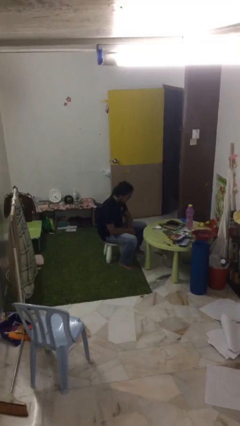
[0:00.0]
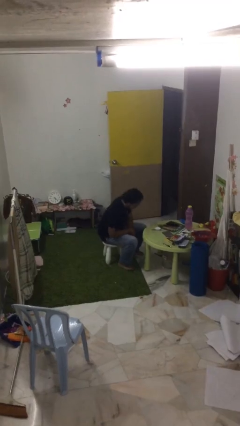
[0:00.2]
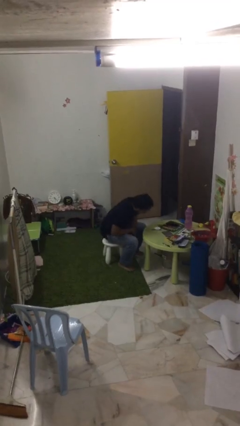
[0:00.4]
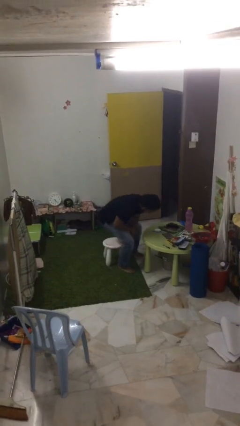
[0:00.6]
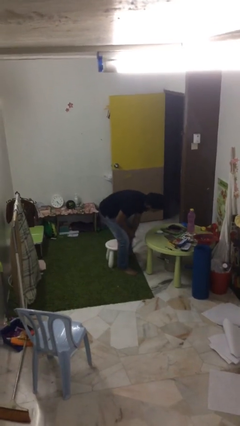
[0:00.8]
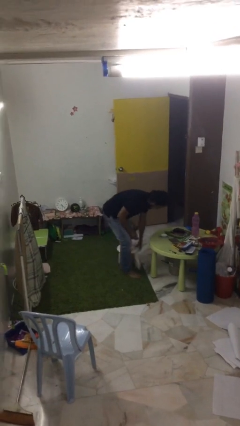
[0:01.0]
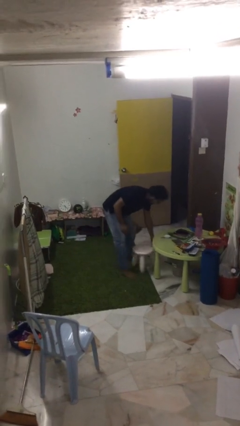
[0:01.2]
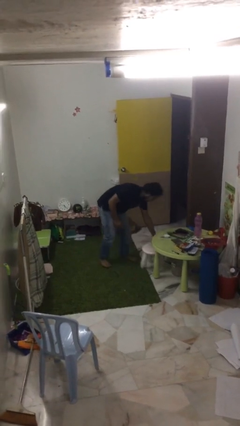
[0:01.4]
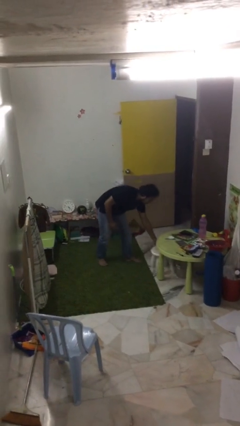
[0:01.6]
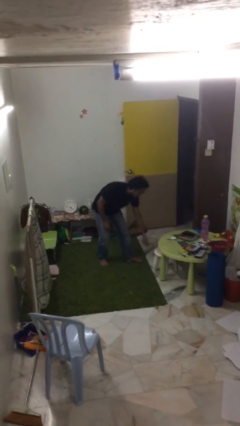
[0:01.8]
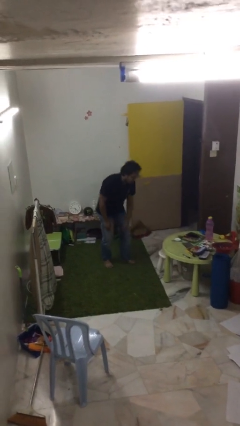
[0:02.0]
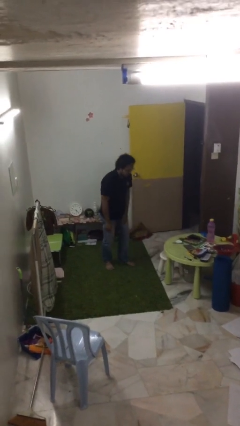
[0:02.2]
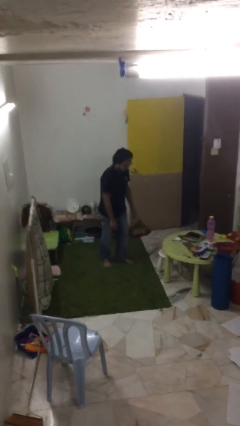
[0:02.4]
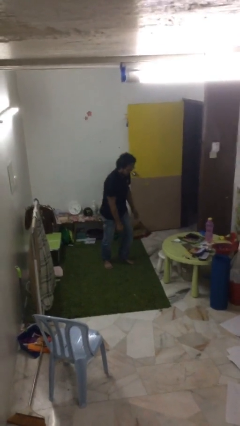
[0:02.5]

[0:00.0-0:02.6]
person stands up

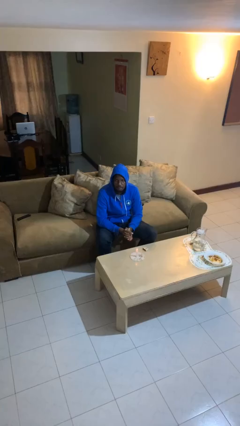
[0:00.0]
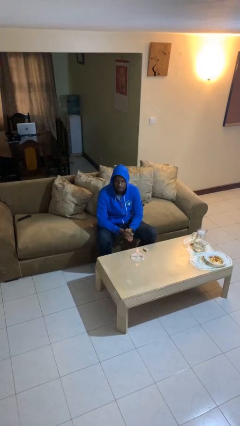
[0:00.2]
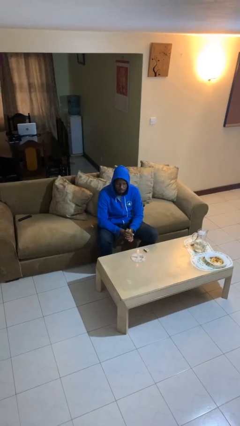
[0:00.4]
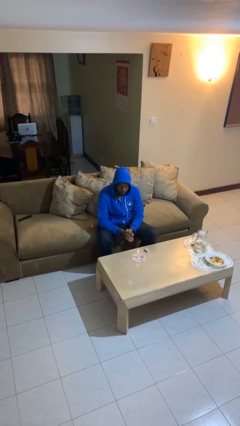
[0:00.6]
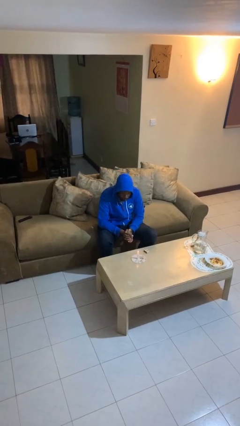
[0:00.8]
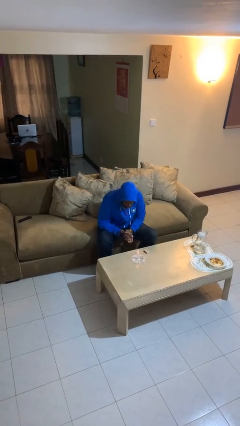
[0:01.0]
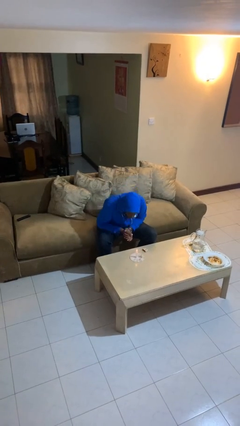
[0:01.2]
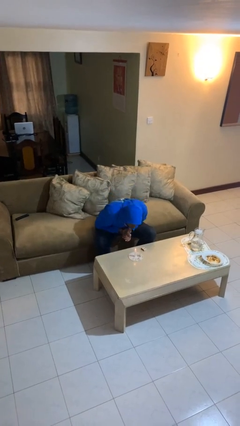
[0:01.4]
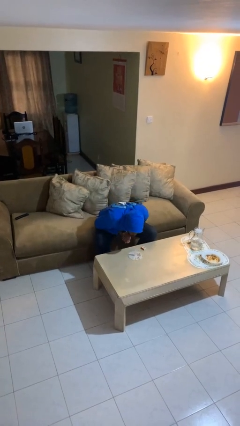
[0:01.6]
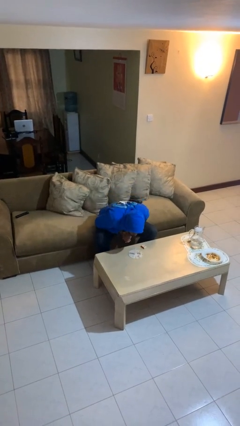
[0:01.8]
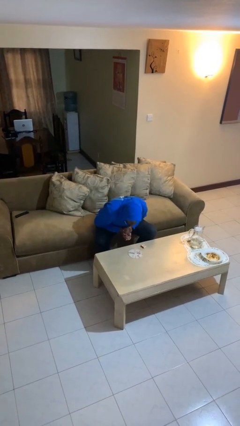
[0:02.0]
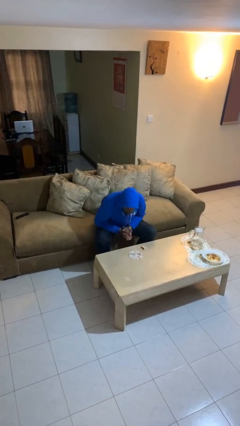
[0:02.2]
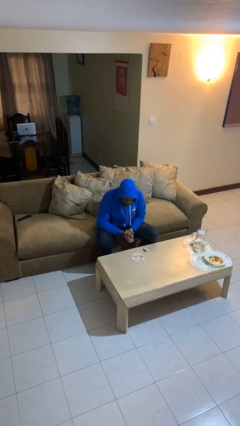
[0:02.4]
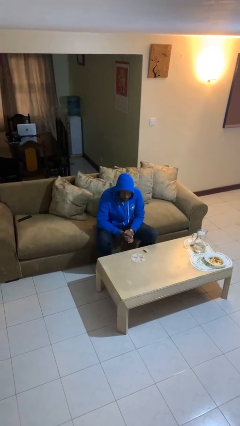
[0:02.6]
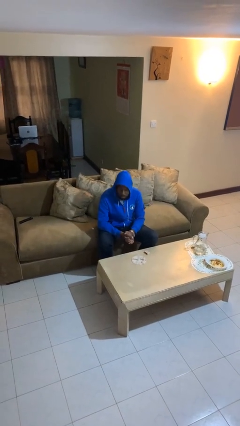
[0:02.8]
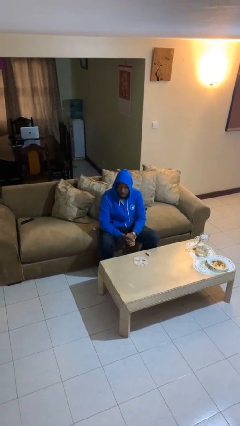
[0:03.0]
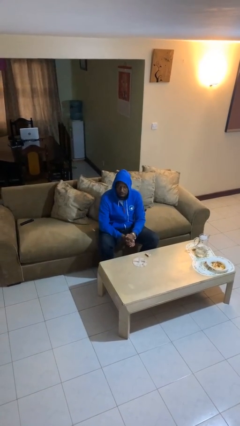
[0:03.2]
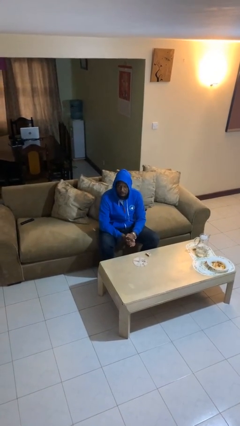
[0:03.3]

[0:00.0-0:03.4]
person extinguishes candle

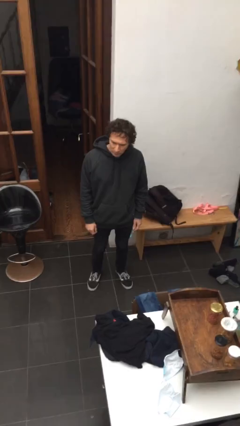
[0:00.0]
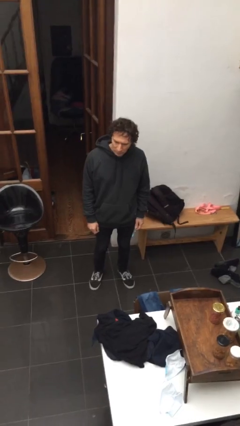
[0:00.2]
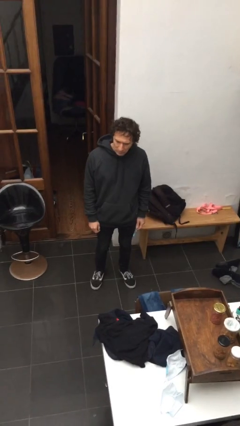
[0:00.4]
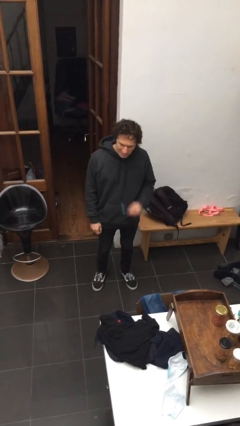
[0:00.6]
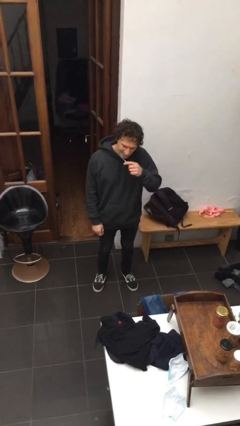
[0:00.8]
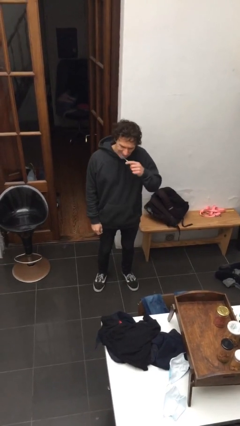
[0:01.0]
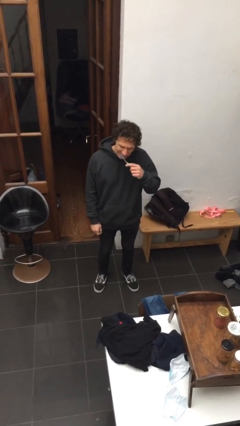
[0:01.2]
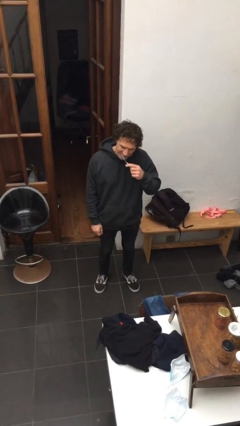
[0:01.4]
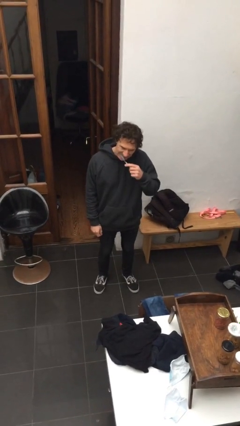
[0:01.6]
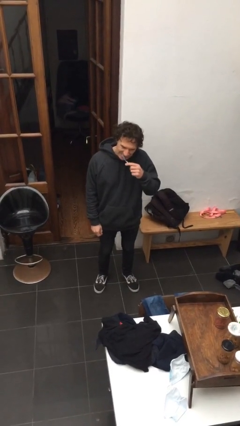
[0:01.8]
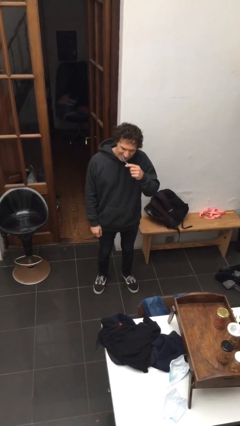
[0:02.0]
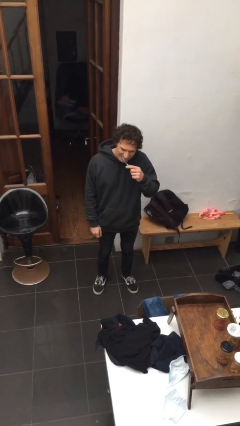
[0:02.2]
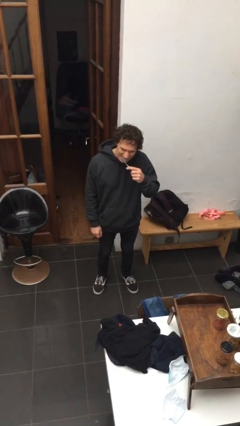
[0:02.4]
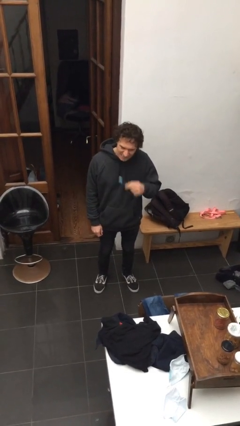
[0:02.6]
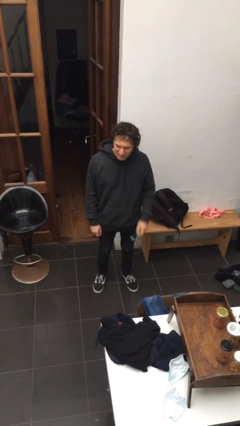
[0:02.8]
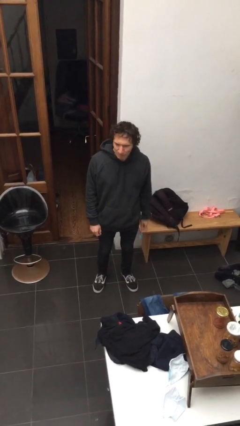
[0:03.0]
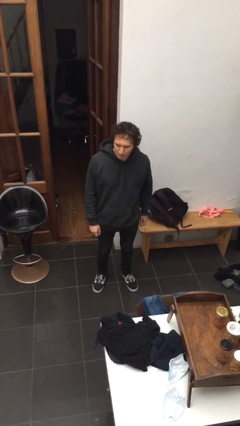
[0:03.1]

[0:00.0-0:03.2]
person flosses

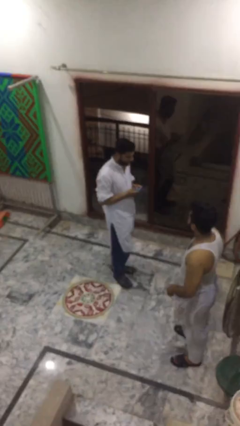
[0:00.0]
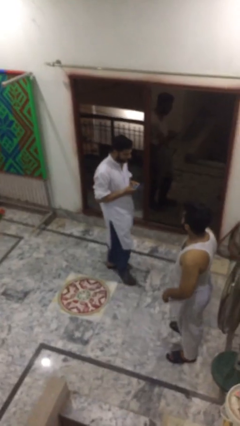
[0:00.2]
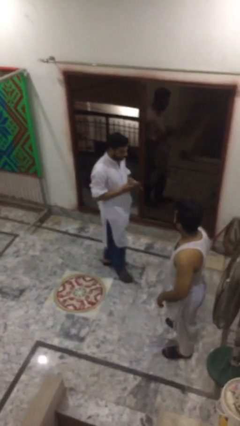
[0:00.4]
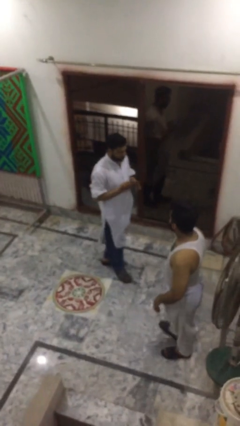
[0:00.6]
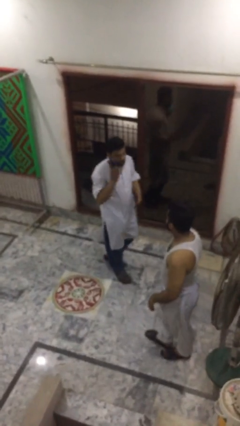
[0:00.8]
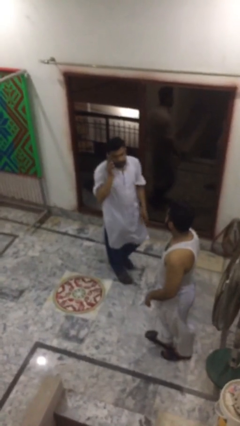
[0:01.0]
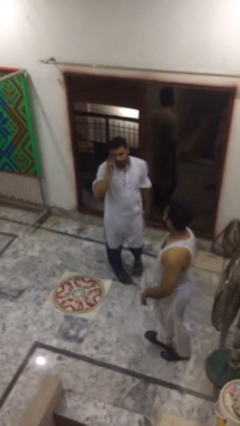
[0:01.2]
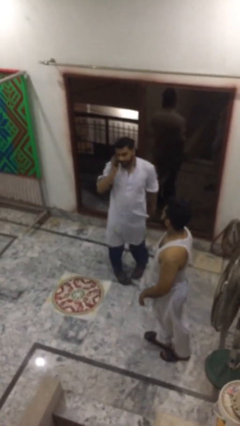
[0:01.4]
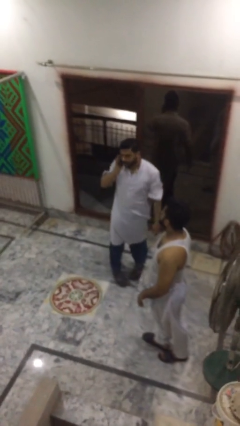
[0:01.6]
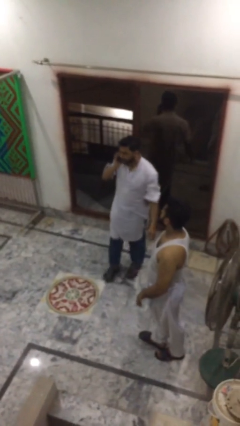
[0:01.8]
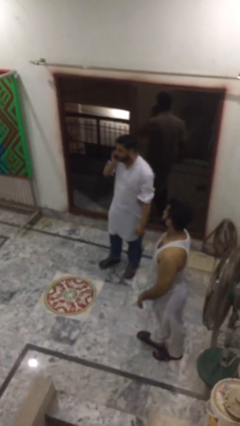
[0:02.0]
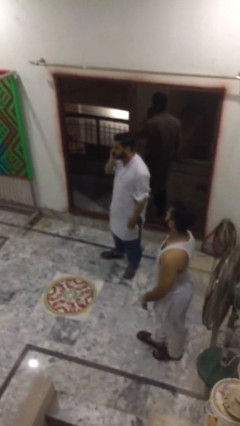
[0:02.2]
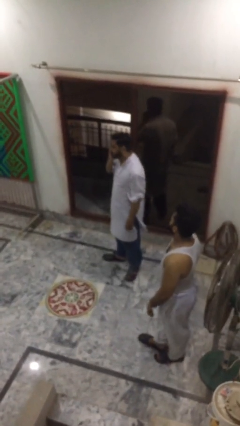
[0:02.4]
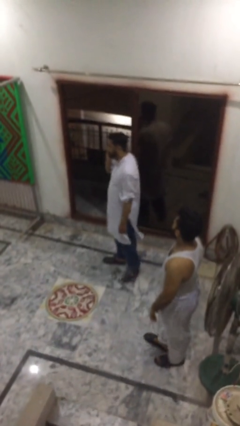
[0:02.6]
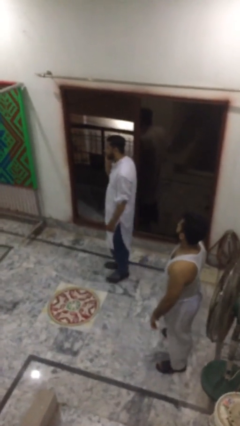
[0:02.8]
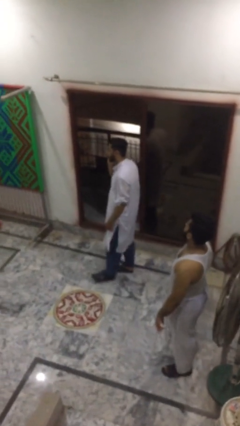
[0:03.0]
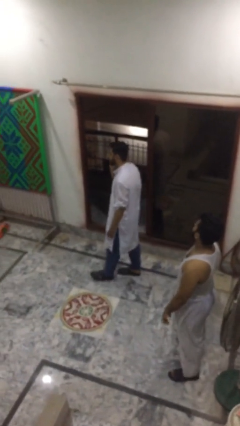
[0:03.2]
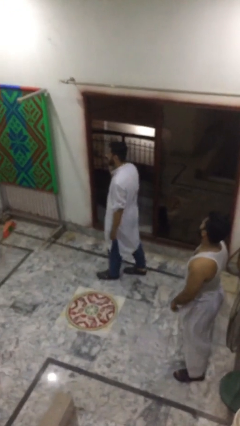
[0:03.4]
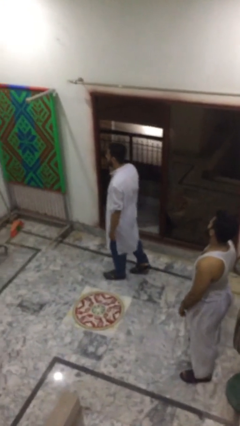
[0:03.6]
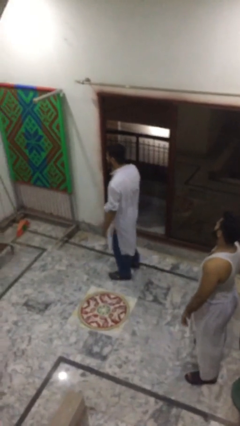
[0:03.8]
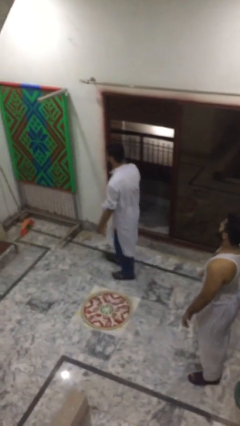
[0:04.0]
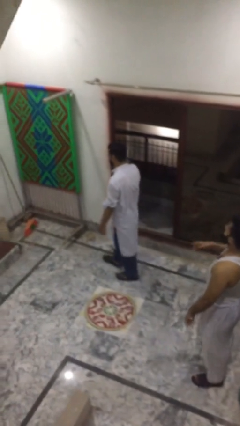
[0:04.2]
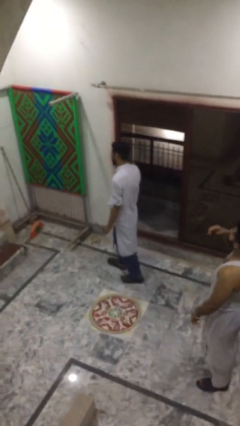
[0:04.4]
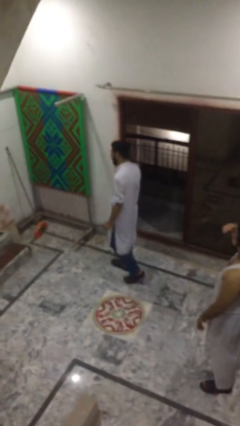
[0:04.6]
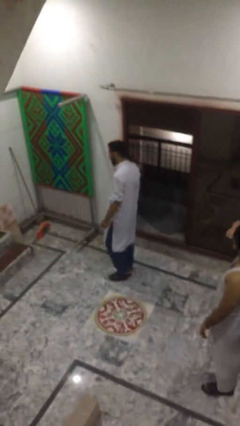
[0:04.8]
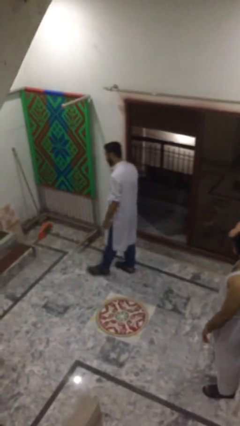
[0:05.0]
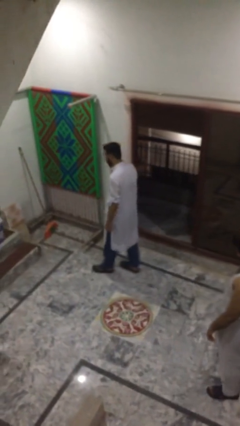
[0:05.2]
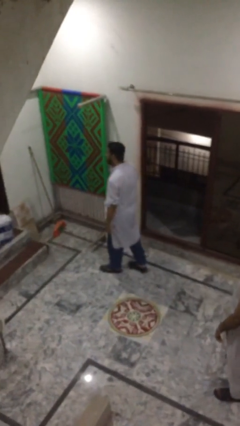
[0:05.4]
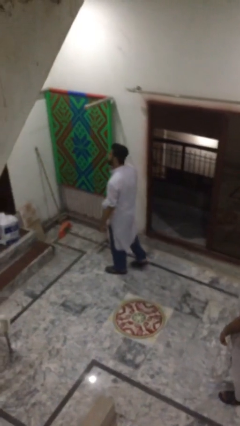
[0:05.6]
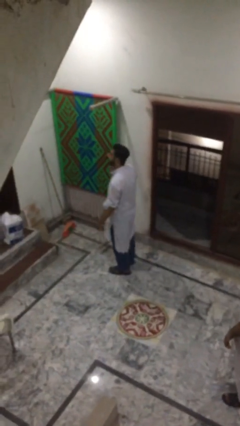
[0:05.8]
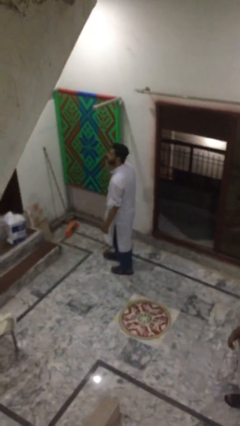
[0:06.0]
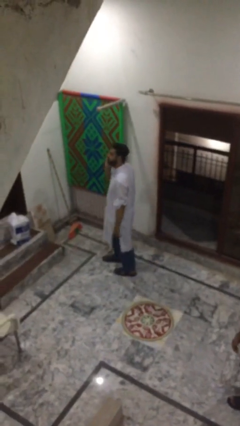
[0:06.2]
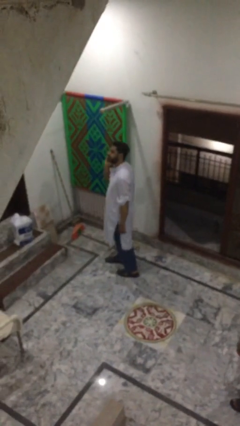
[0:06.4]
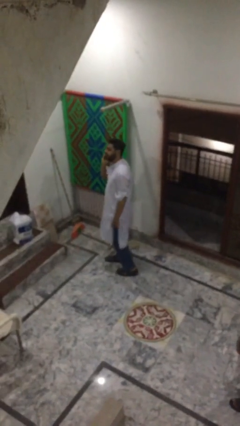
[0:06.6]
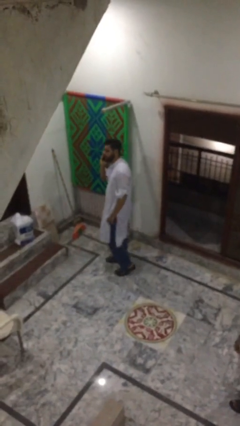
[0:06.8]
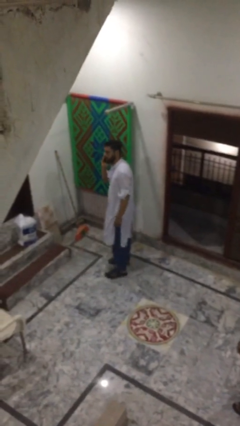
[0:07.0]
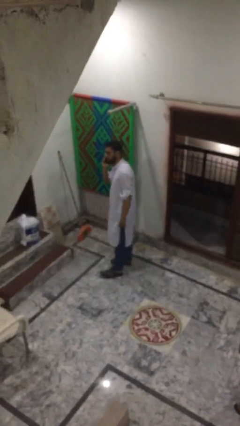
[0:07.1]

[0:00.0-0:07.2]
person talks on phone

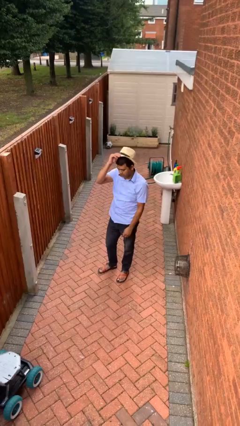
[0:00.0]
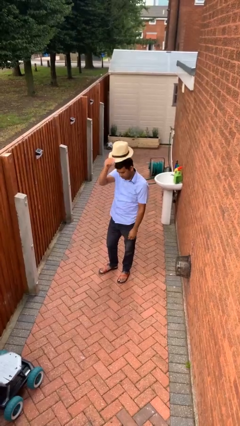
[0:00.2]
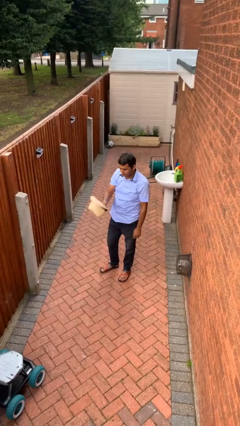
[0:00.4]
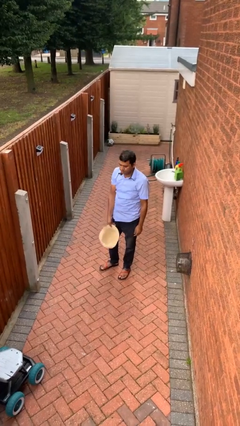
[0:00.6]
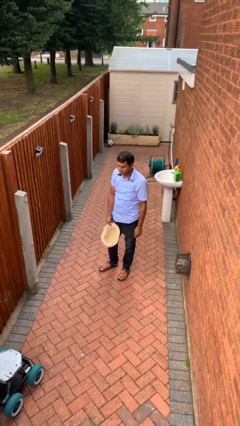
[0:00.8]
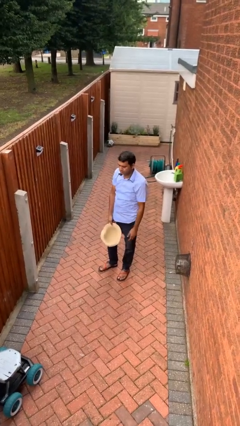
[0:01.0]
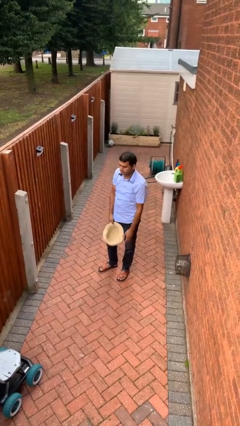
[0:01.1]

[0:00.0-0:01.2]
person takes off hat
